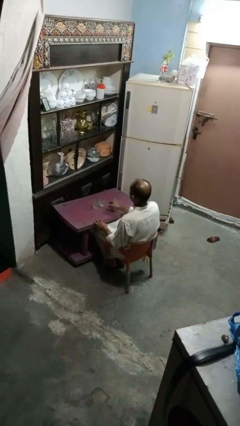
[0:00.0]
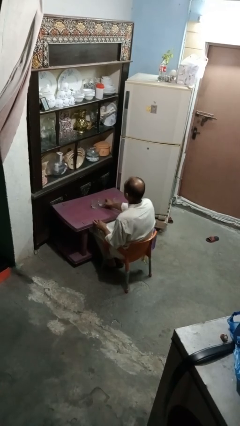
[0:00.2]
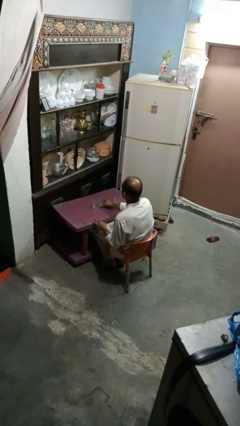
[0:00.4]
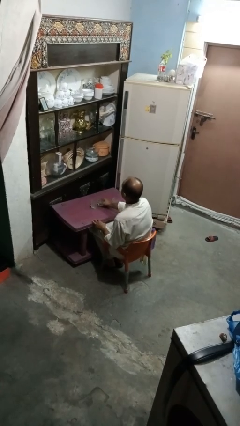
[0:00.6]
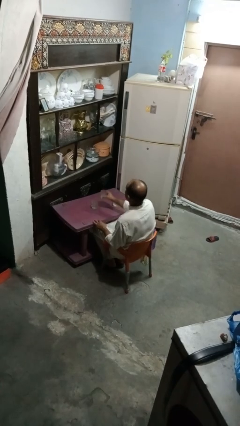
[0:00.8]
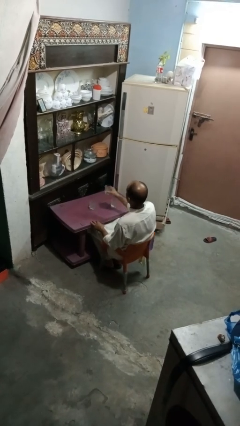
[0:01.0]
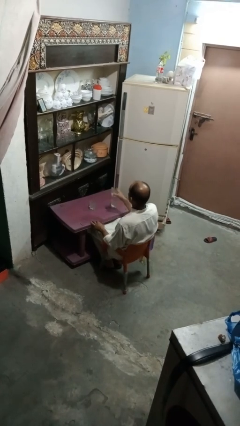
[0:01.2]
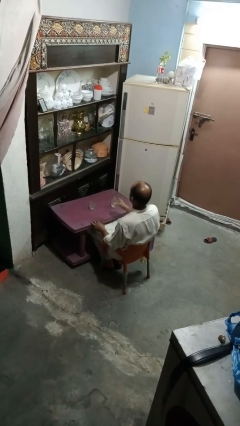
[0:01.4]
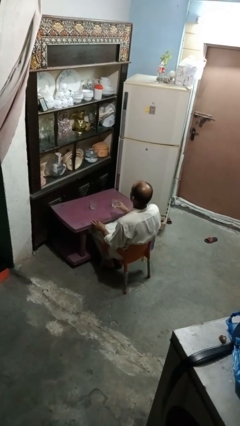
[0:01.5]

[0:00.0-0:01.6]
person picks up object from table

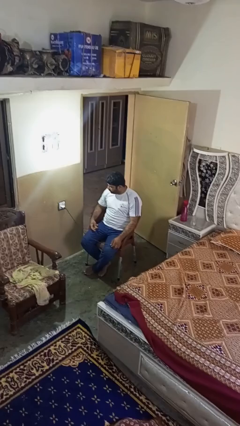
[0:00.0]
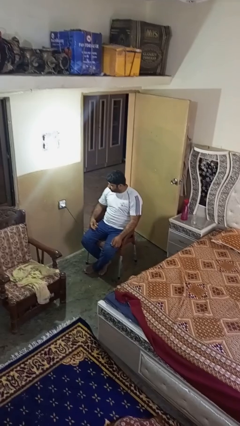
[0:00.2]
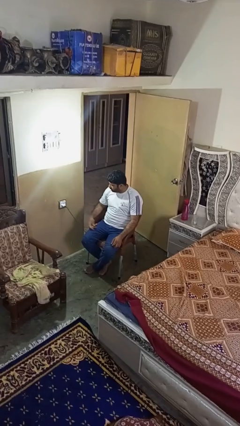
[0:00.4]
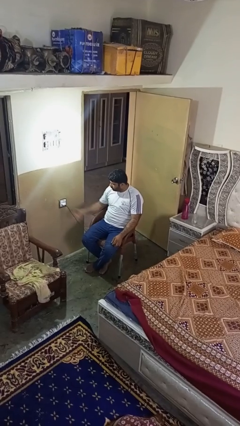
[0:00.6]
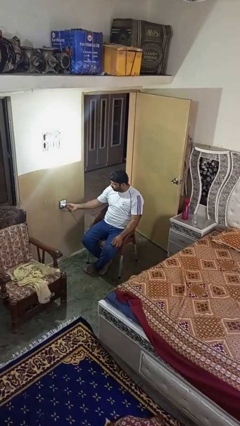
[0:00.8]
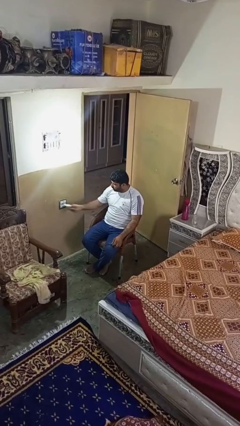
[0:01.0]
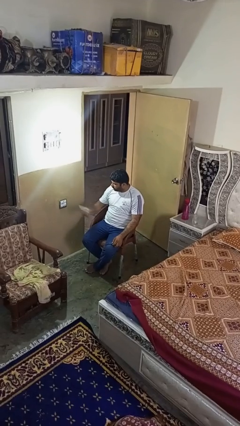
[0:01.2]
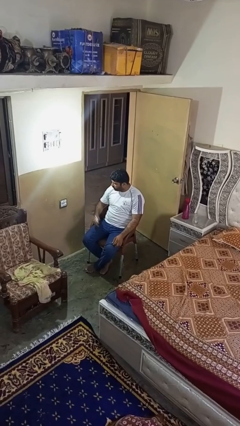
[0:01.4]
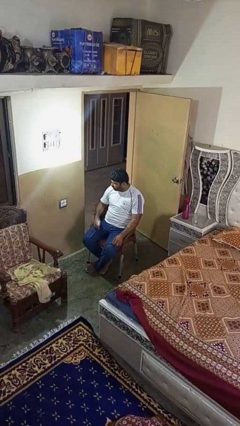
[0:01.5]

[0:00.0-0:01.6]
person unplugs from electrical socket

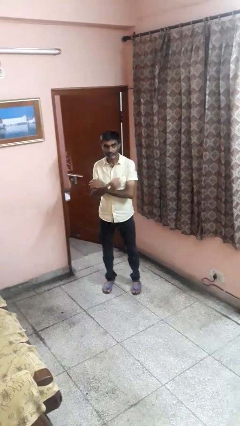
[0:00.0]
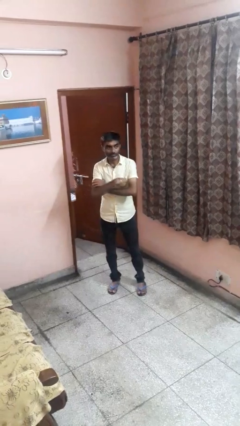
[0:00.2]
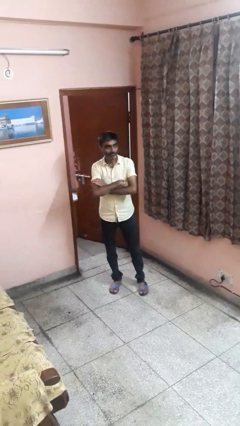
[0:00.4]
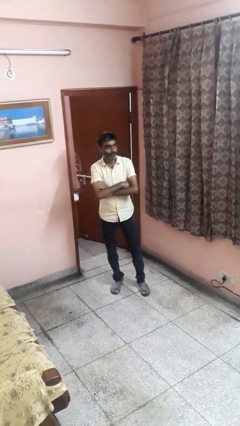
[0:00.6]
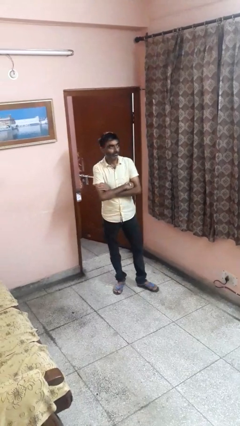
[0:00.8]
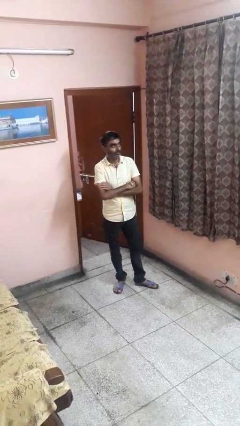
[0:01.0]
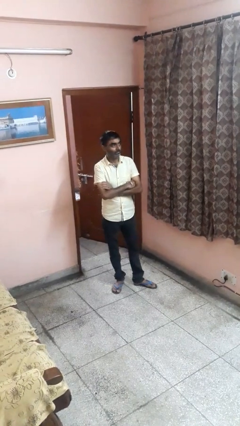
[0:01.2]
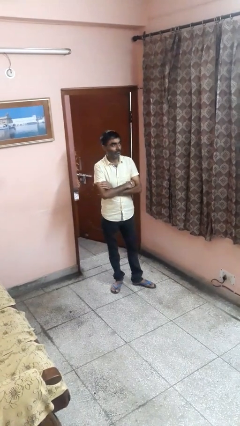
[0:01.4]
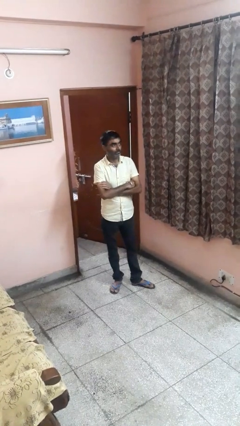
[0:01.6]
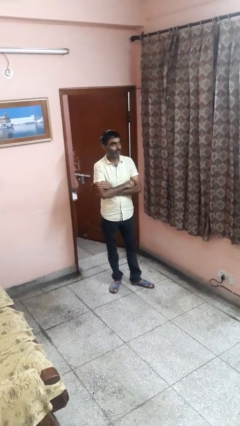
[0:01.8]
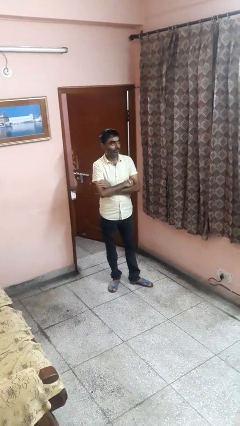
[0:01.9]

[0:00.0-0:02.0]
person crosses arms

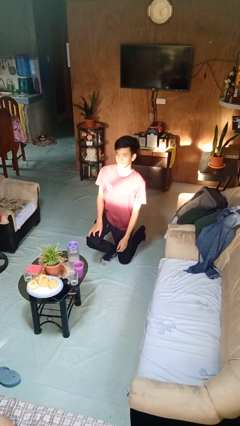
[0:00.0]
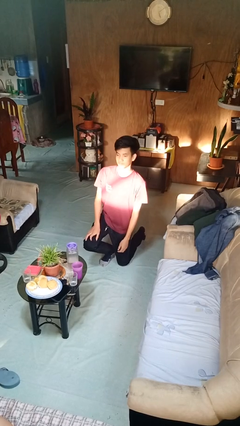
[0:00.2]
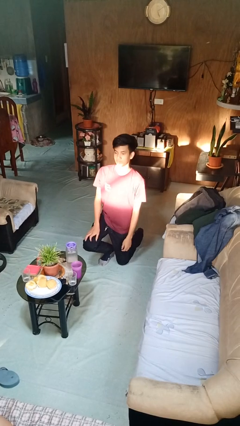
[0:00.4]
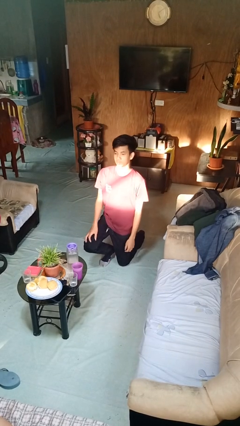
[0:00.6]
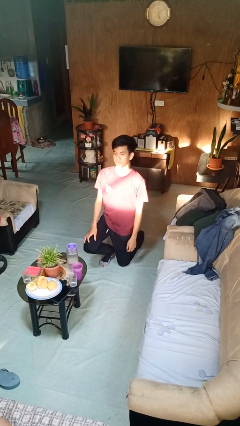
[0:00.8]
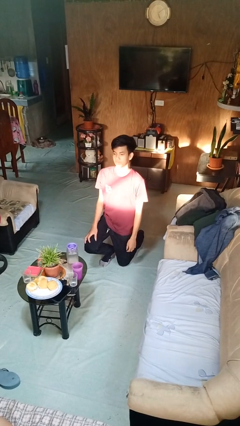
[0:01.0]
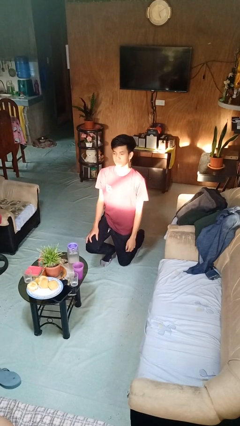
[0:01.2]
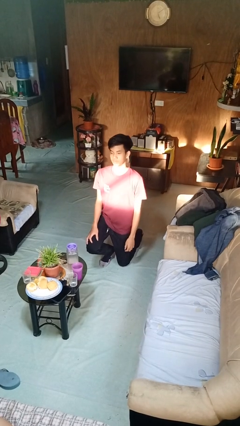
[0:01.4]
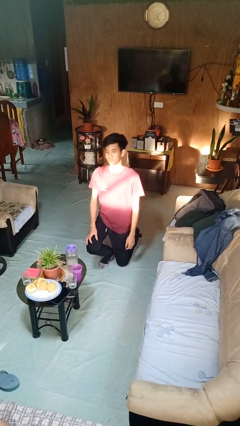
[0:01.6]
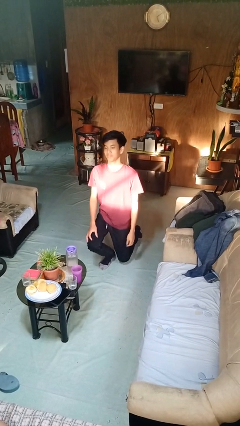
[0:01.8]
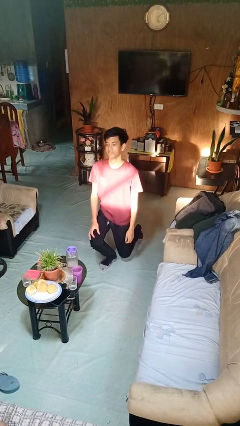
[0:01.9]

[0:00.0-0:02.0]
person kneels

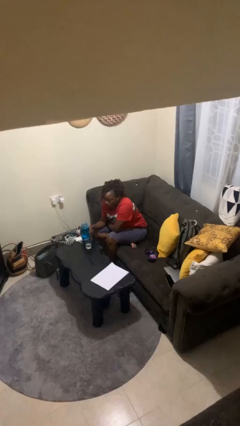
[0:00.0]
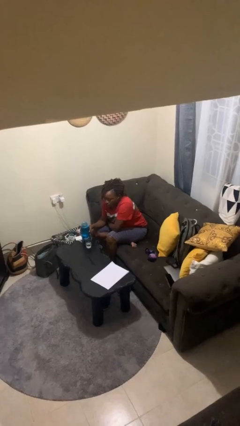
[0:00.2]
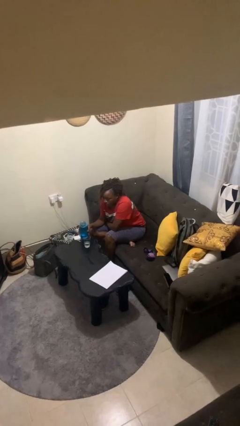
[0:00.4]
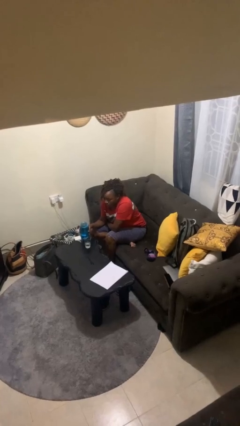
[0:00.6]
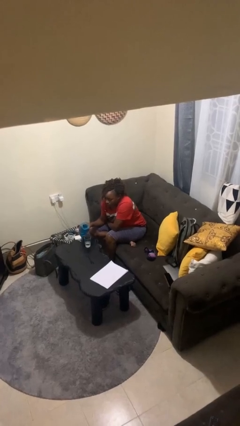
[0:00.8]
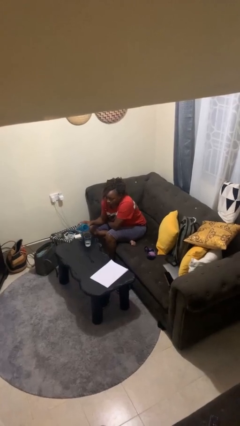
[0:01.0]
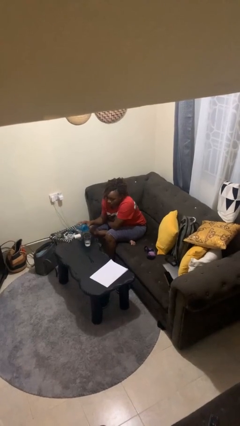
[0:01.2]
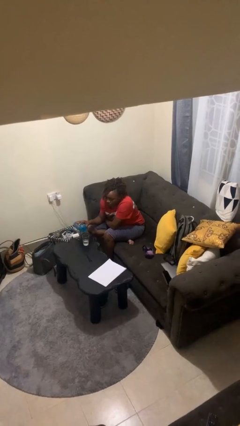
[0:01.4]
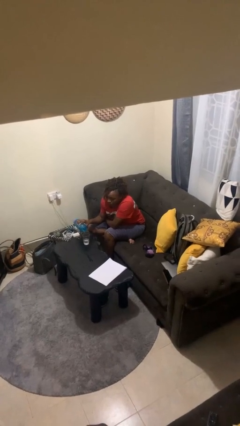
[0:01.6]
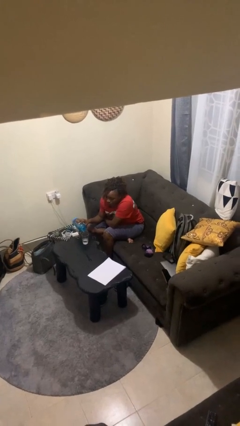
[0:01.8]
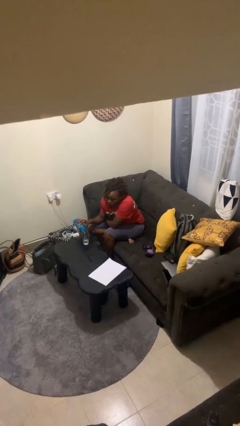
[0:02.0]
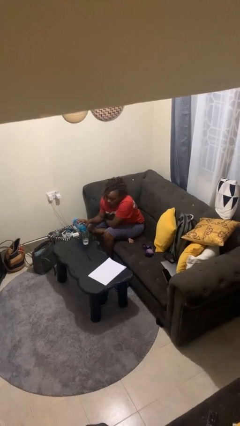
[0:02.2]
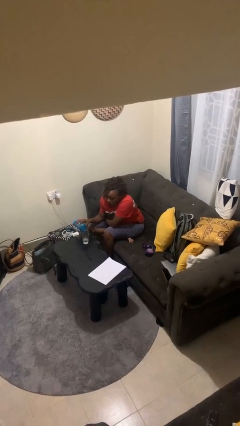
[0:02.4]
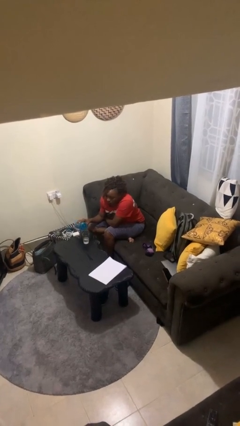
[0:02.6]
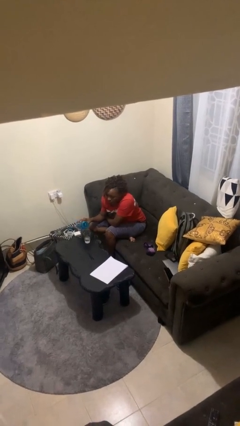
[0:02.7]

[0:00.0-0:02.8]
person pours liquid into cup

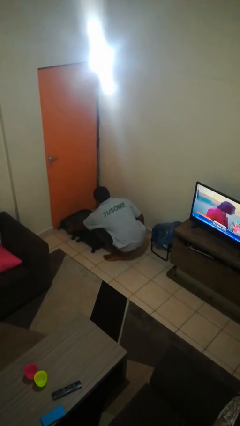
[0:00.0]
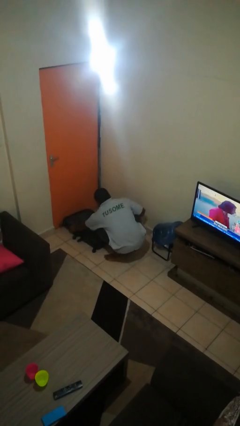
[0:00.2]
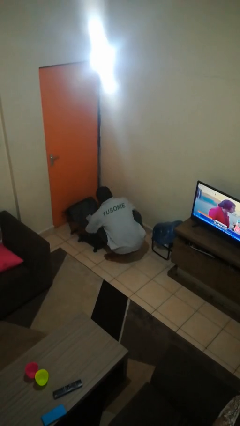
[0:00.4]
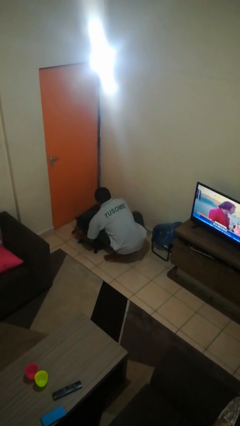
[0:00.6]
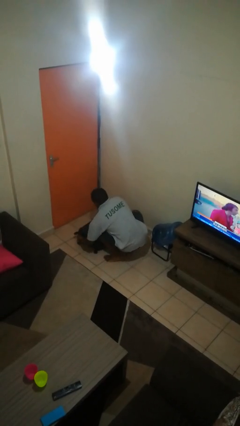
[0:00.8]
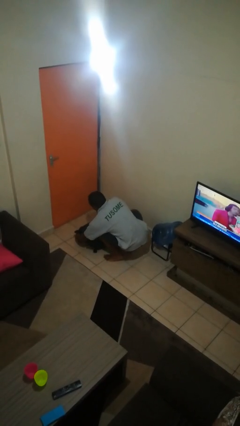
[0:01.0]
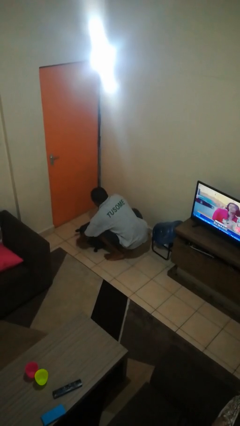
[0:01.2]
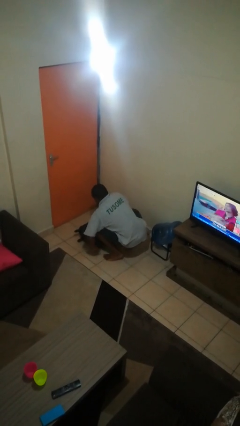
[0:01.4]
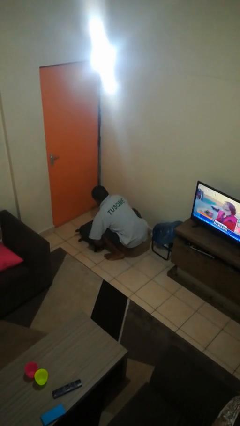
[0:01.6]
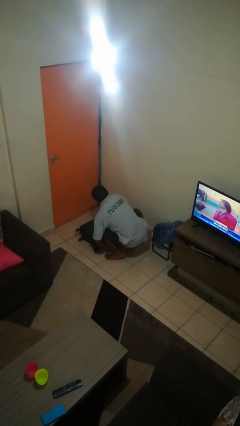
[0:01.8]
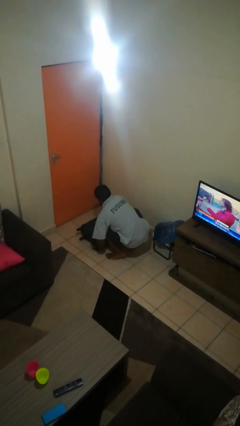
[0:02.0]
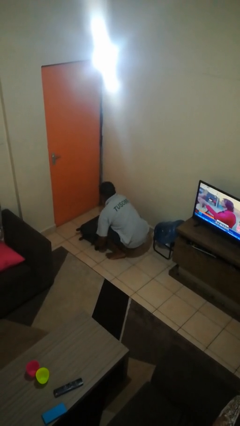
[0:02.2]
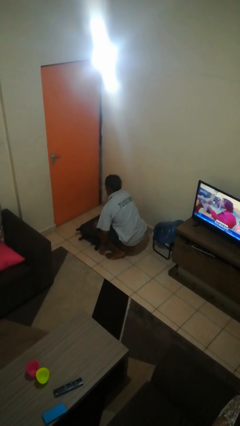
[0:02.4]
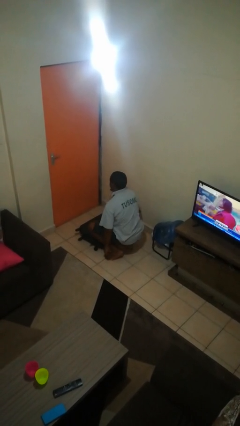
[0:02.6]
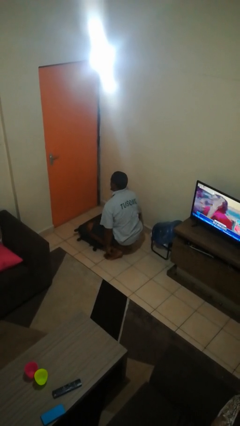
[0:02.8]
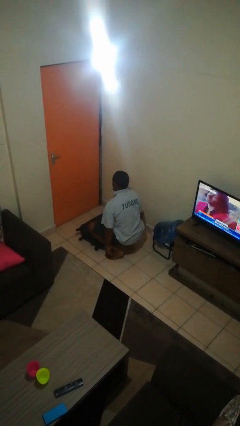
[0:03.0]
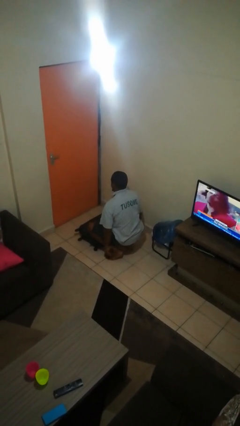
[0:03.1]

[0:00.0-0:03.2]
person closes suitcase

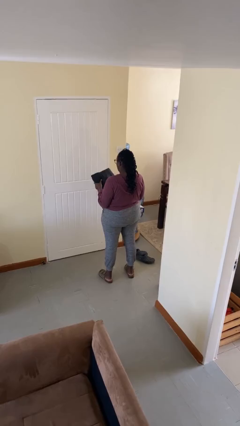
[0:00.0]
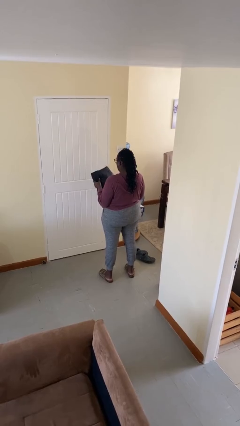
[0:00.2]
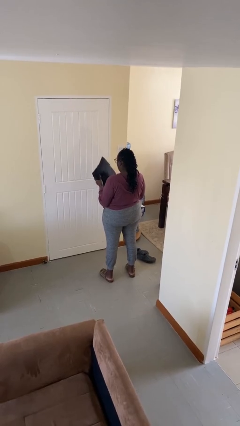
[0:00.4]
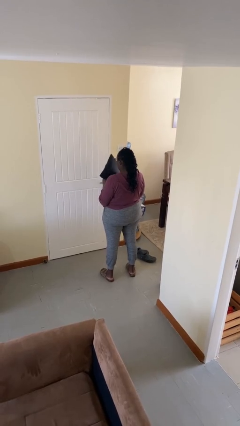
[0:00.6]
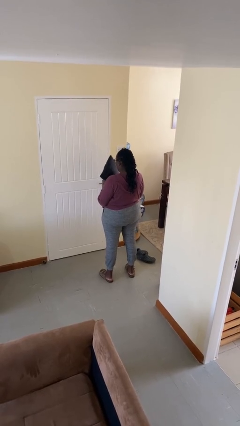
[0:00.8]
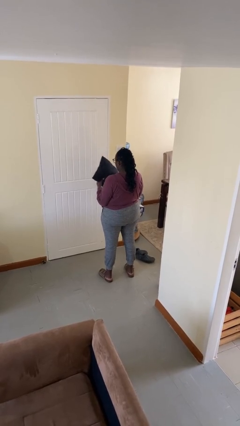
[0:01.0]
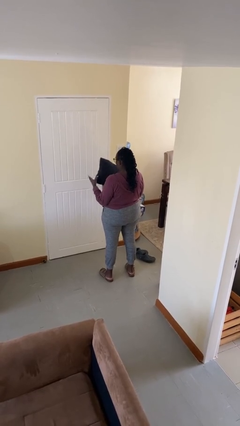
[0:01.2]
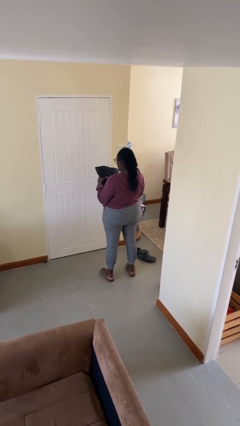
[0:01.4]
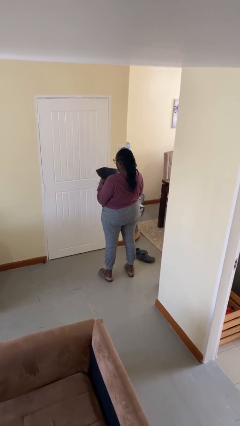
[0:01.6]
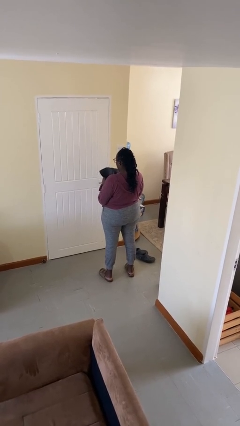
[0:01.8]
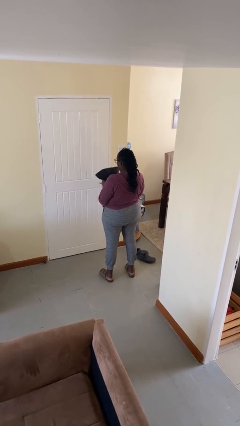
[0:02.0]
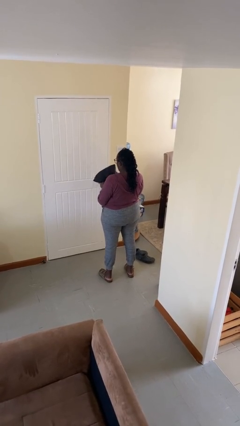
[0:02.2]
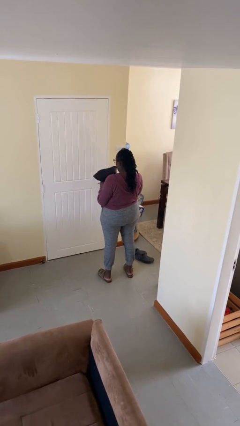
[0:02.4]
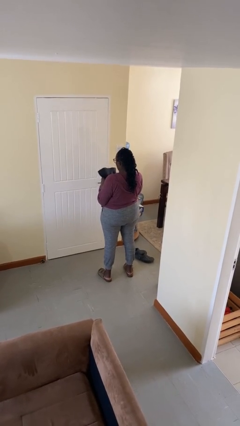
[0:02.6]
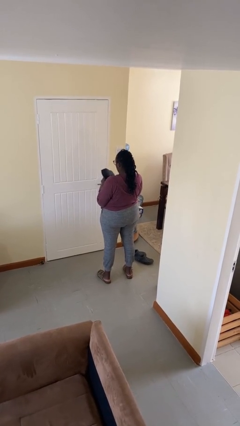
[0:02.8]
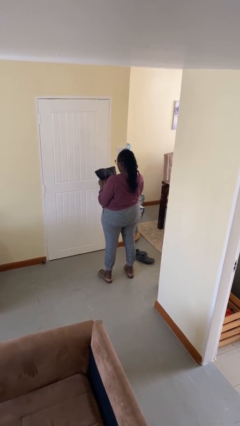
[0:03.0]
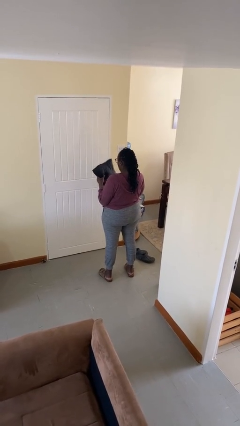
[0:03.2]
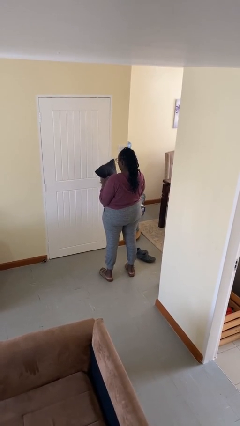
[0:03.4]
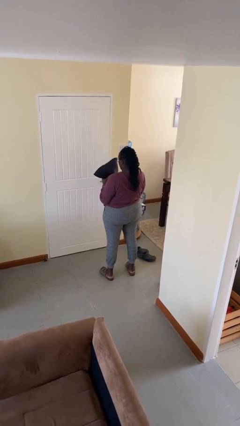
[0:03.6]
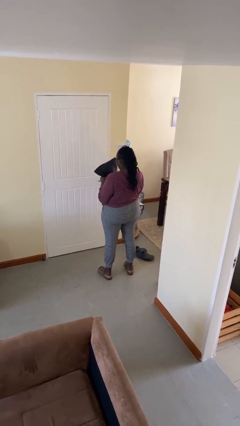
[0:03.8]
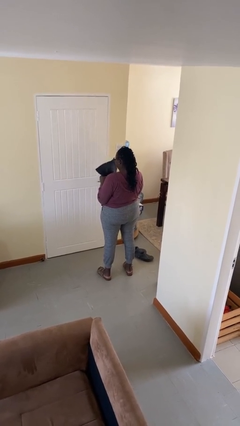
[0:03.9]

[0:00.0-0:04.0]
person squeezes object
